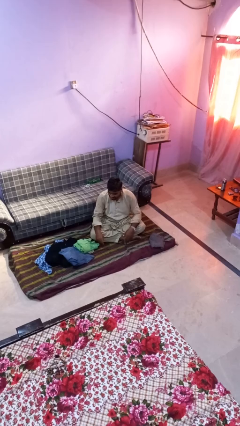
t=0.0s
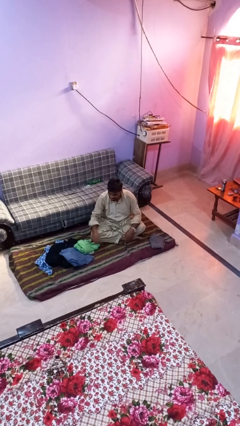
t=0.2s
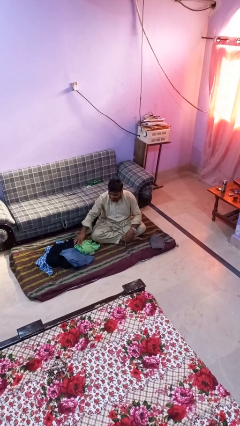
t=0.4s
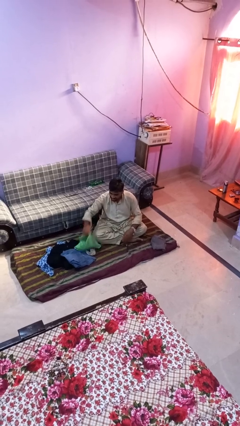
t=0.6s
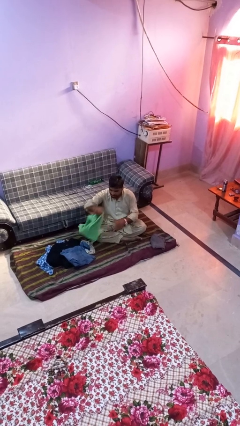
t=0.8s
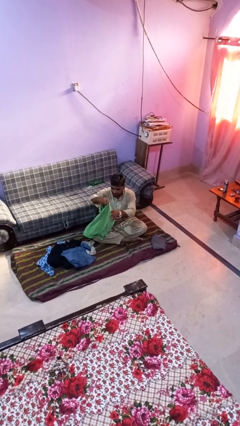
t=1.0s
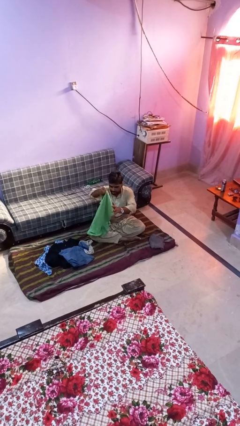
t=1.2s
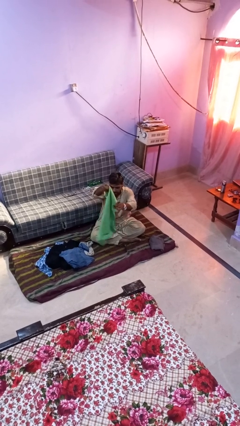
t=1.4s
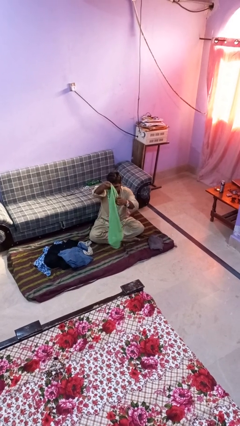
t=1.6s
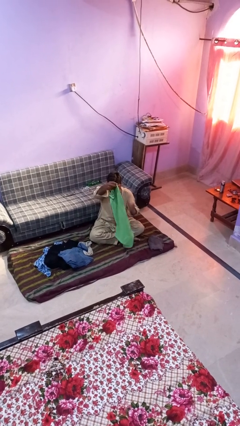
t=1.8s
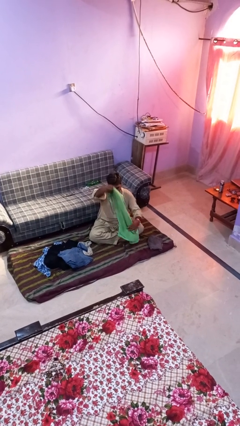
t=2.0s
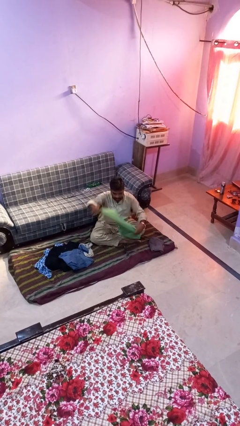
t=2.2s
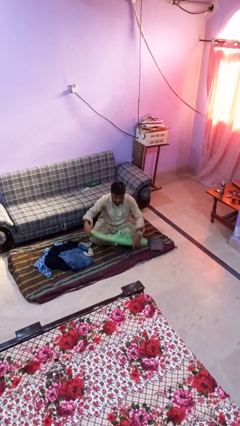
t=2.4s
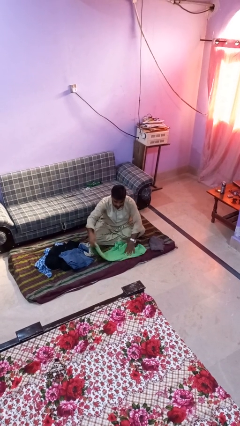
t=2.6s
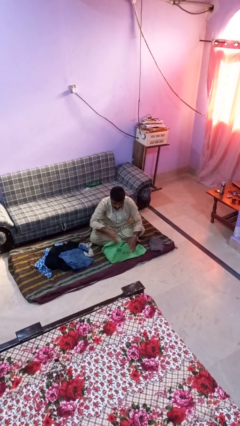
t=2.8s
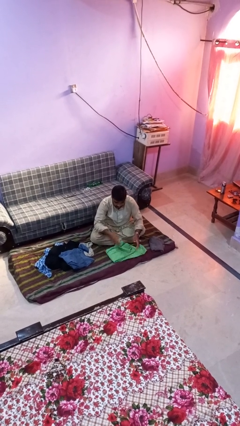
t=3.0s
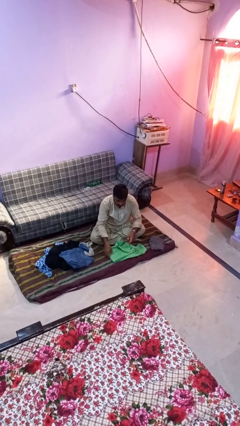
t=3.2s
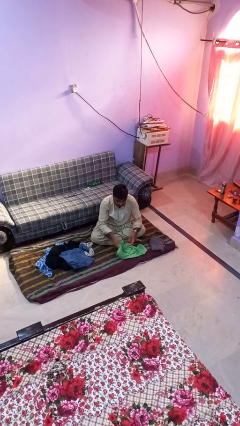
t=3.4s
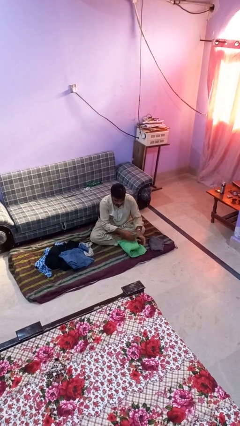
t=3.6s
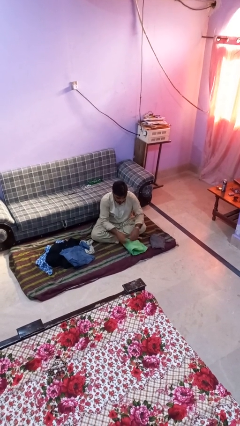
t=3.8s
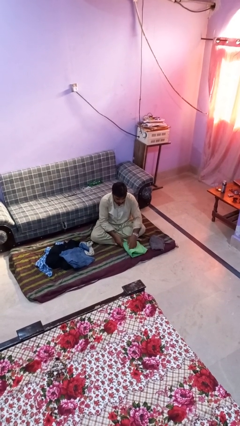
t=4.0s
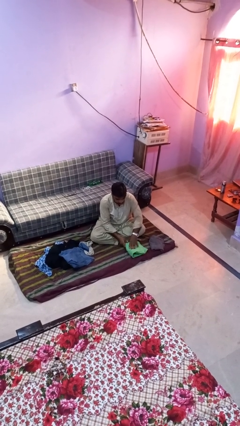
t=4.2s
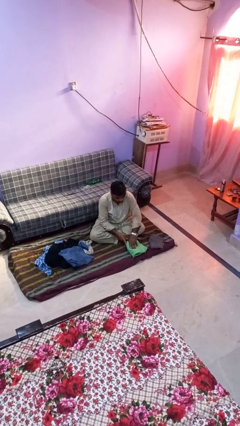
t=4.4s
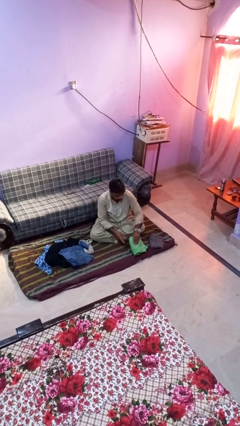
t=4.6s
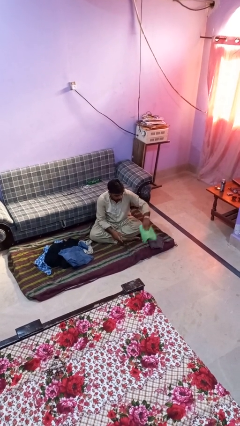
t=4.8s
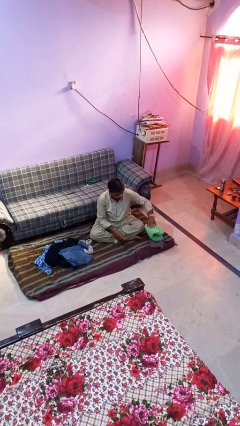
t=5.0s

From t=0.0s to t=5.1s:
person folds shirt

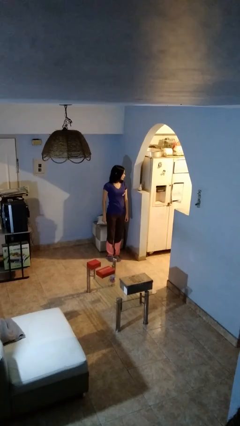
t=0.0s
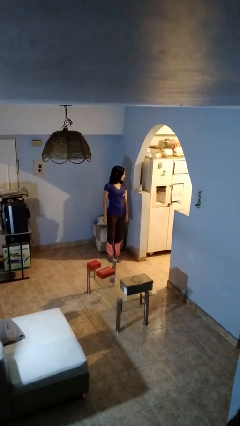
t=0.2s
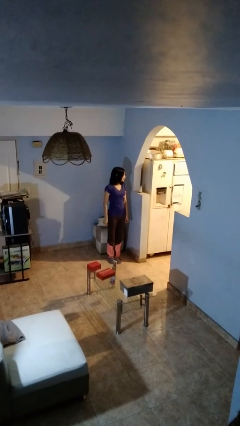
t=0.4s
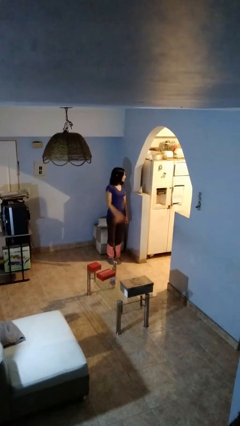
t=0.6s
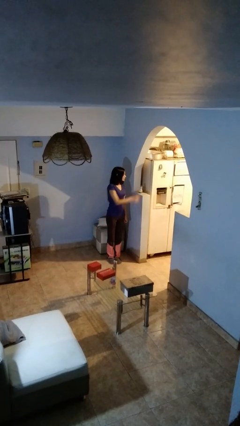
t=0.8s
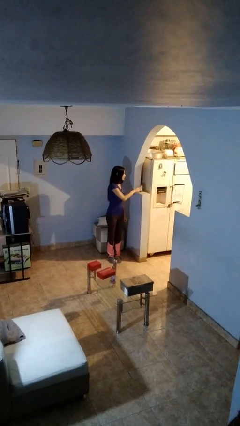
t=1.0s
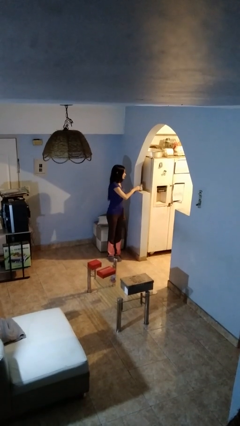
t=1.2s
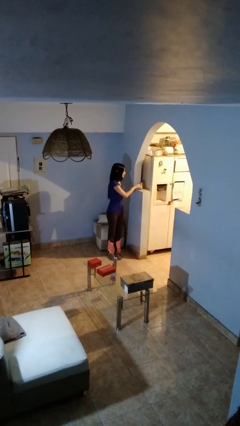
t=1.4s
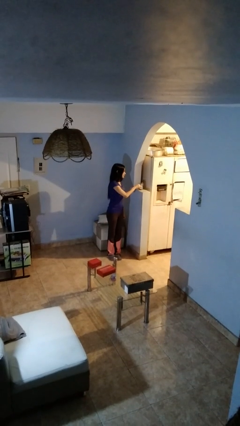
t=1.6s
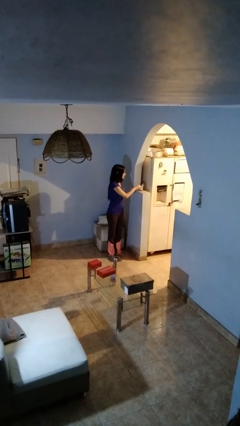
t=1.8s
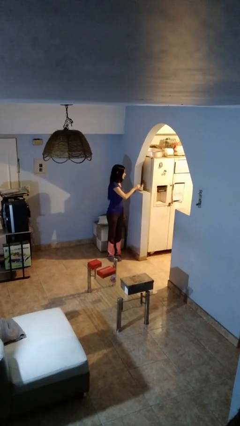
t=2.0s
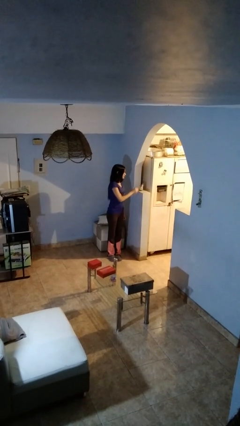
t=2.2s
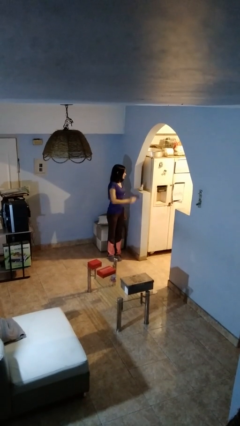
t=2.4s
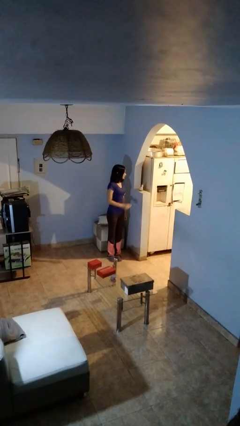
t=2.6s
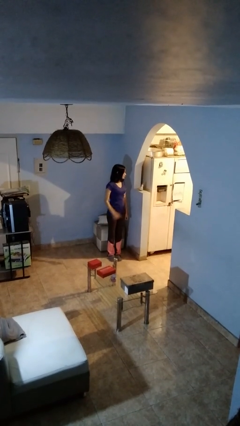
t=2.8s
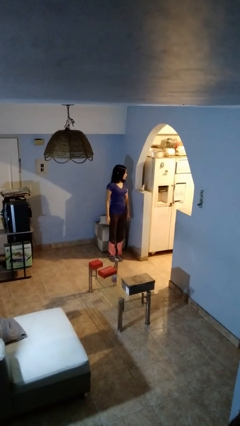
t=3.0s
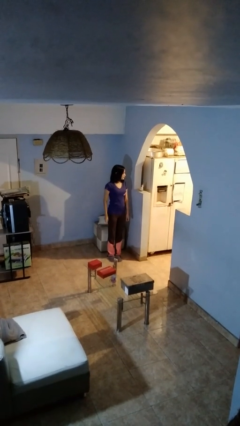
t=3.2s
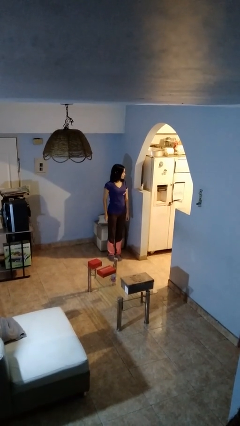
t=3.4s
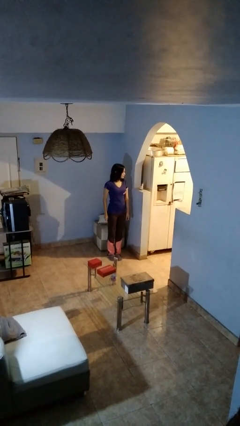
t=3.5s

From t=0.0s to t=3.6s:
person taps object with finger

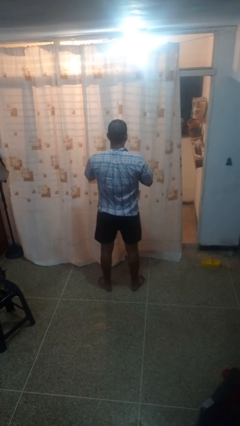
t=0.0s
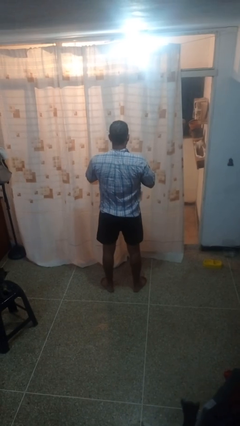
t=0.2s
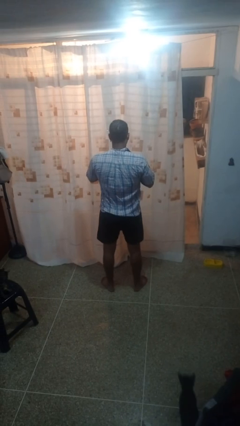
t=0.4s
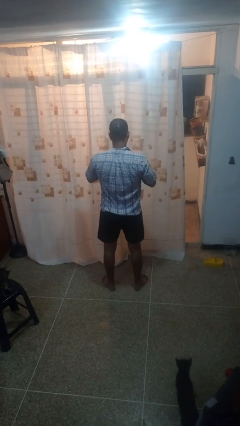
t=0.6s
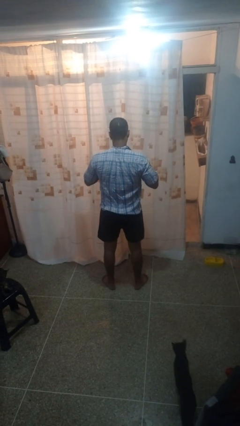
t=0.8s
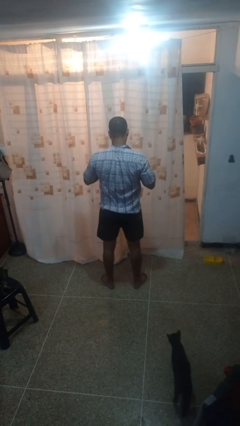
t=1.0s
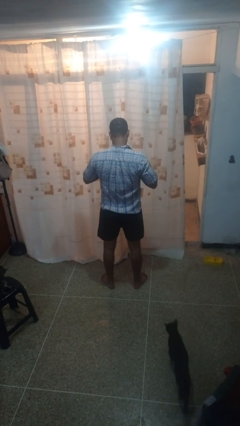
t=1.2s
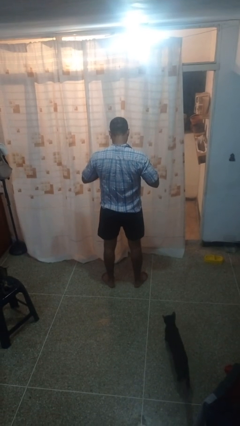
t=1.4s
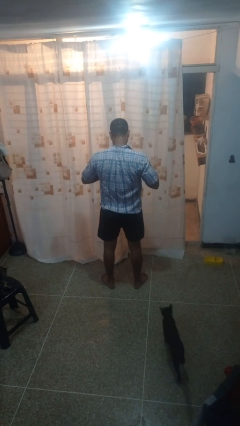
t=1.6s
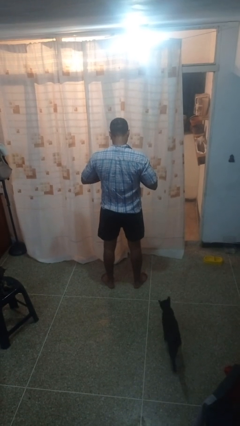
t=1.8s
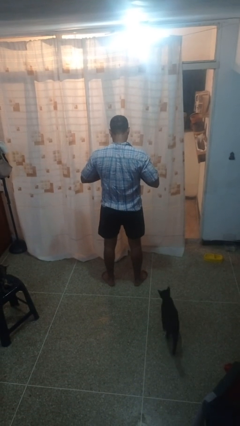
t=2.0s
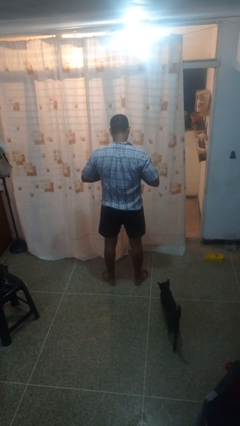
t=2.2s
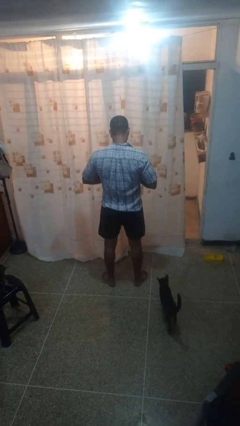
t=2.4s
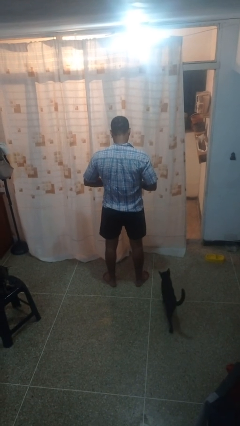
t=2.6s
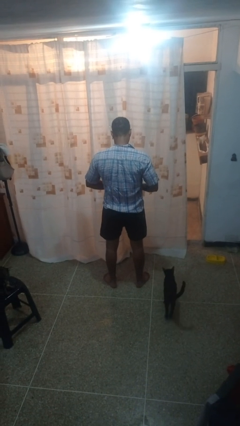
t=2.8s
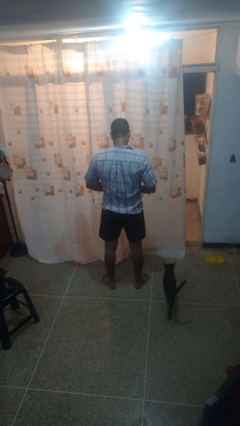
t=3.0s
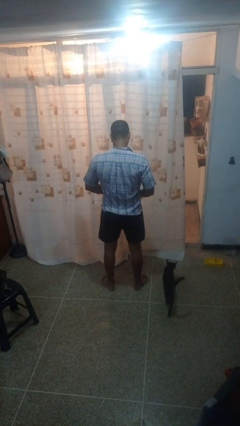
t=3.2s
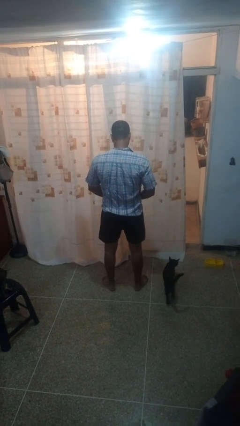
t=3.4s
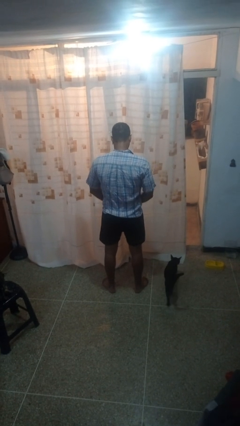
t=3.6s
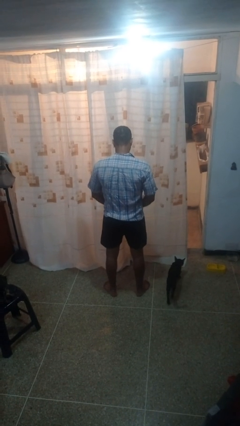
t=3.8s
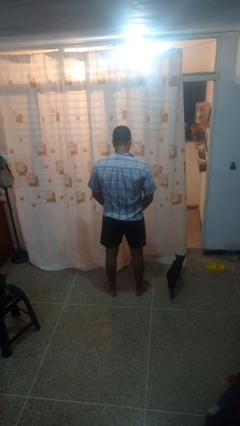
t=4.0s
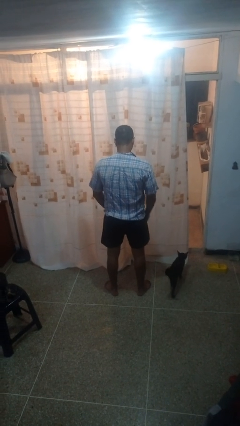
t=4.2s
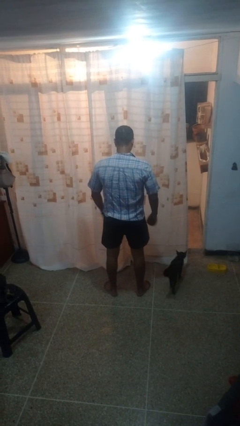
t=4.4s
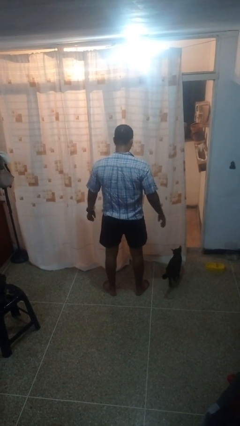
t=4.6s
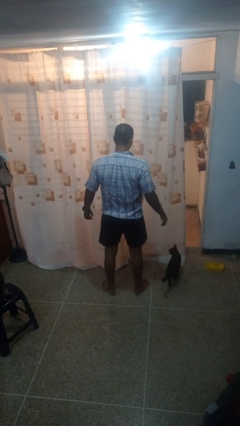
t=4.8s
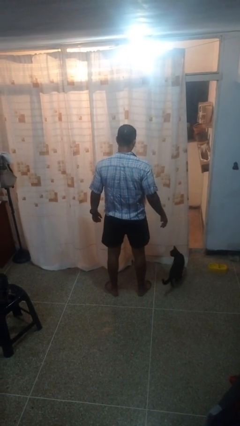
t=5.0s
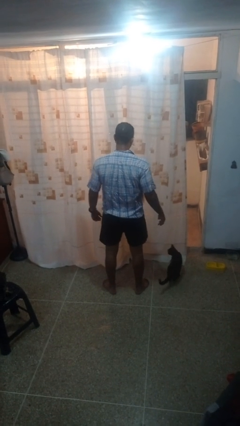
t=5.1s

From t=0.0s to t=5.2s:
person unbuttons shirt

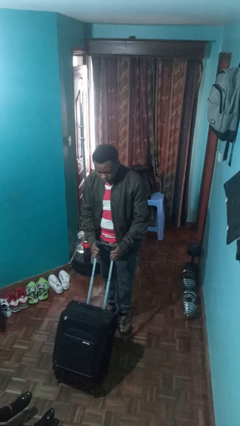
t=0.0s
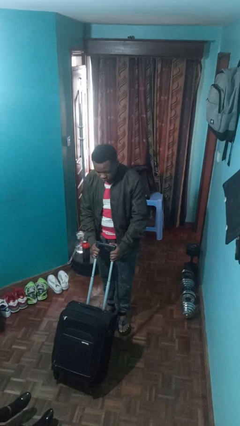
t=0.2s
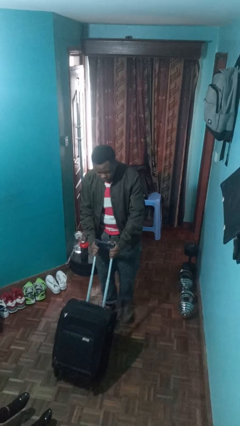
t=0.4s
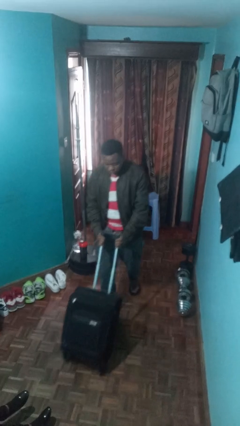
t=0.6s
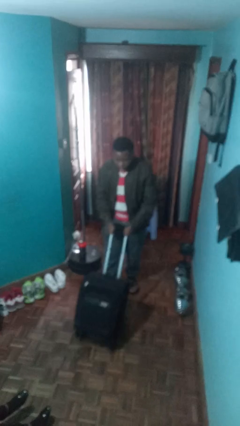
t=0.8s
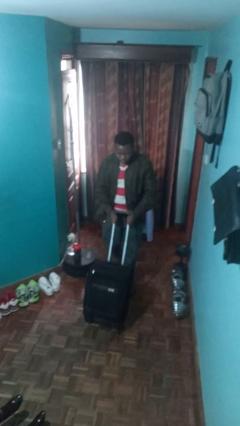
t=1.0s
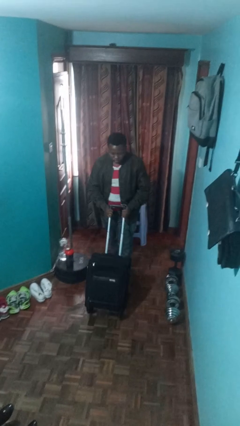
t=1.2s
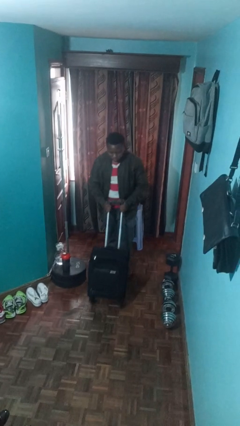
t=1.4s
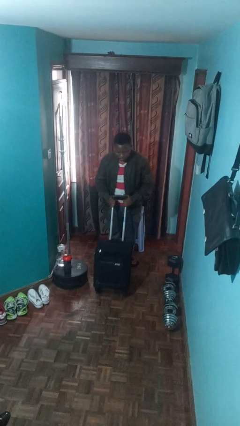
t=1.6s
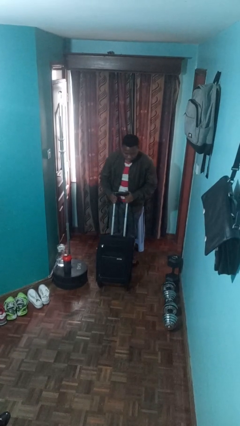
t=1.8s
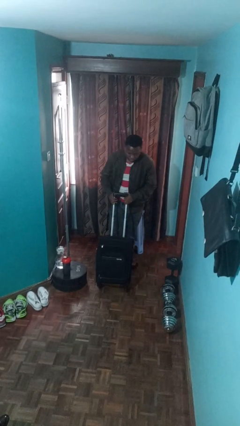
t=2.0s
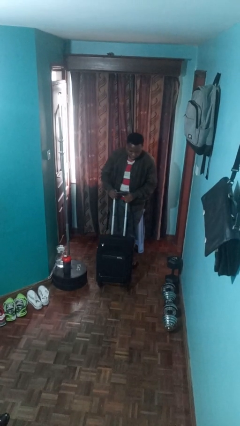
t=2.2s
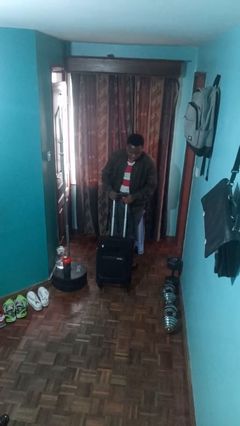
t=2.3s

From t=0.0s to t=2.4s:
person pulls wheeled cart

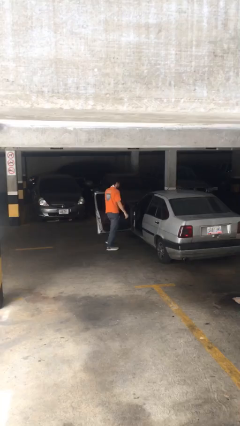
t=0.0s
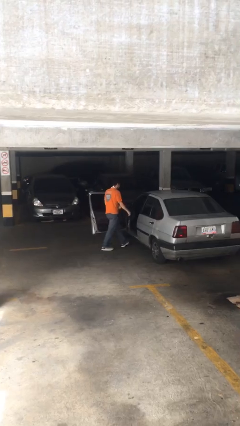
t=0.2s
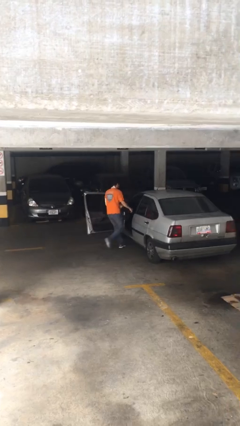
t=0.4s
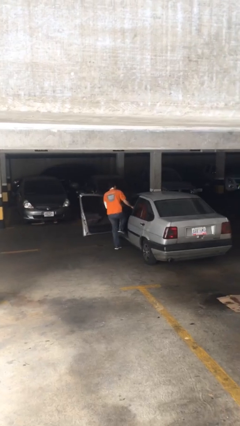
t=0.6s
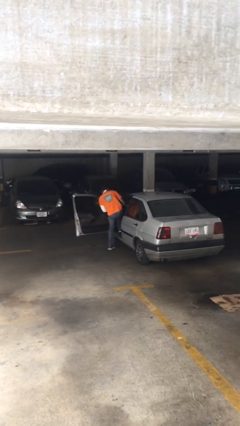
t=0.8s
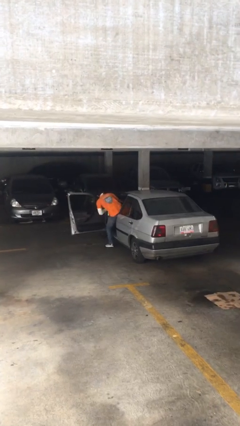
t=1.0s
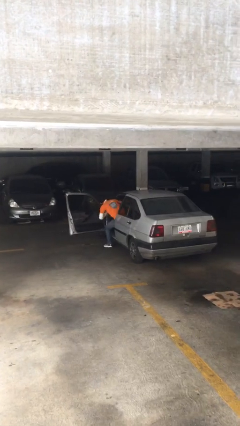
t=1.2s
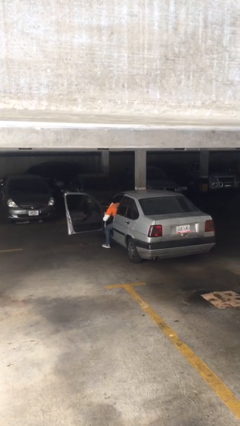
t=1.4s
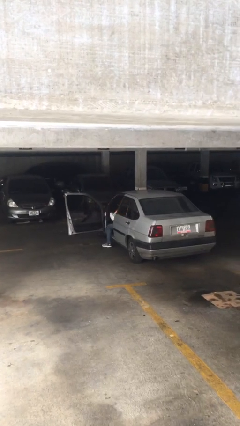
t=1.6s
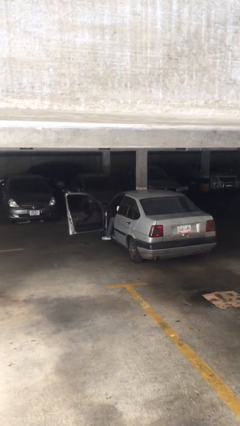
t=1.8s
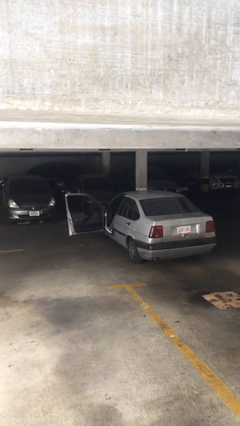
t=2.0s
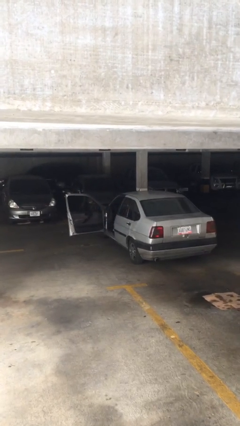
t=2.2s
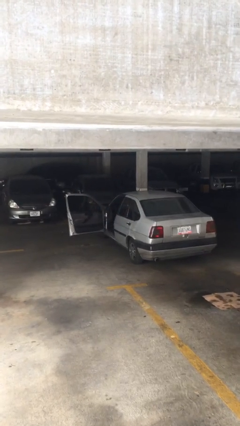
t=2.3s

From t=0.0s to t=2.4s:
person enters car
